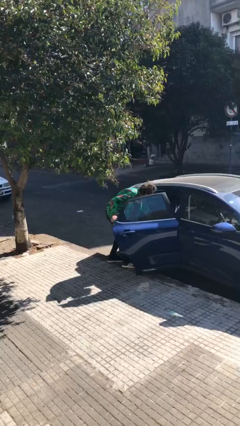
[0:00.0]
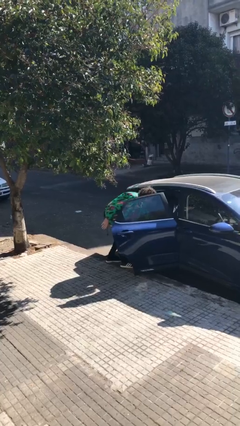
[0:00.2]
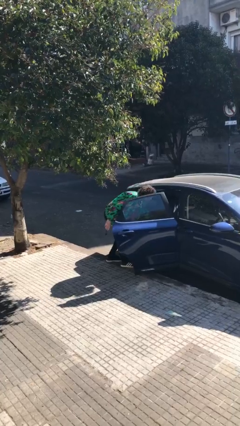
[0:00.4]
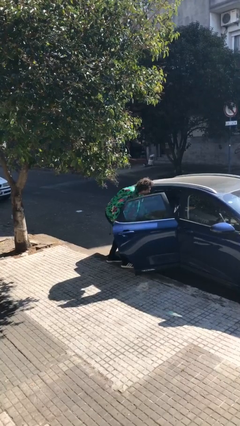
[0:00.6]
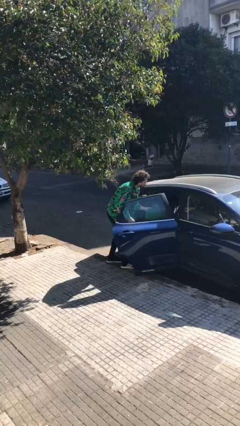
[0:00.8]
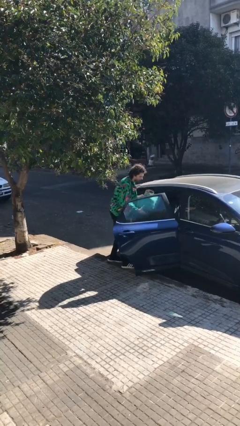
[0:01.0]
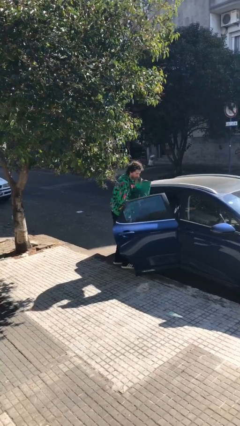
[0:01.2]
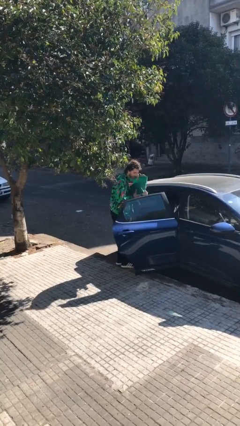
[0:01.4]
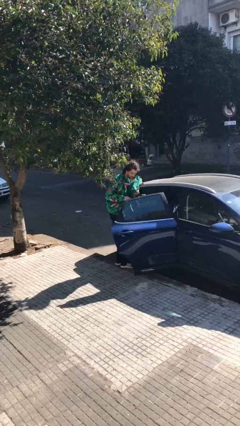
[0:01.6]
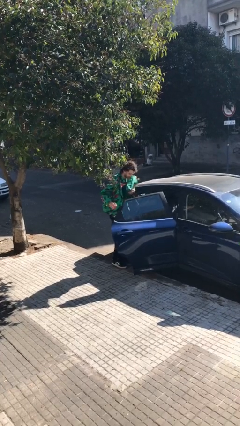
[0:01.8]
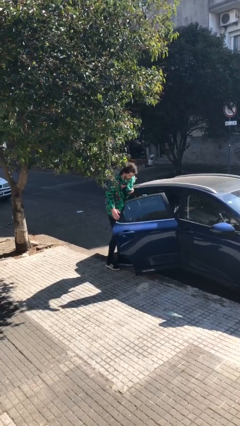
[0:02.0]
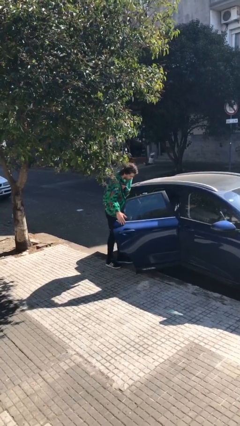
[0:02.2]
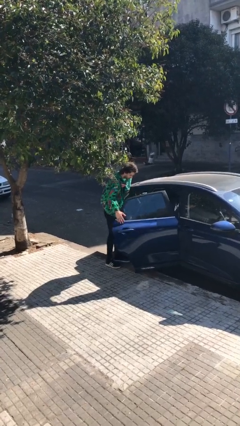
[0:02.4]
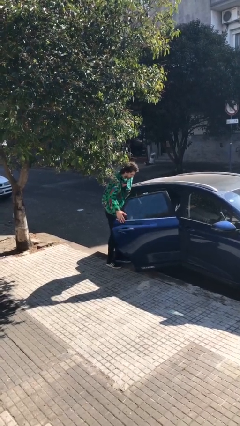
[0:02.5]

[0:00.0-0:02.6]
person unloads car

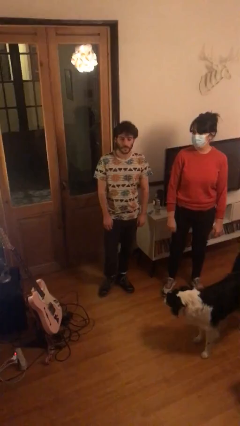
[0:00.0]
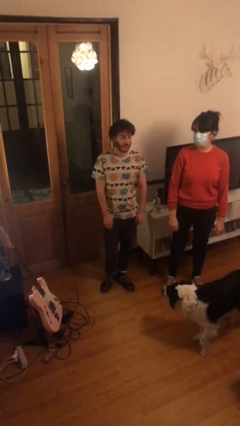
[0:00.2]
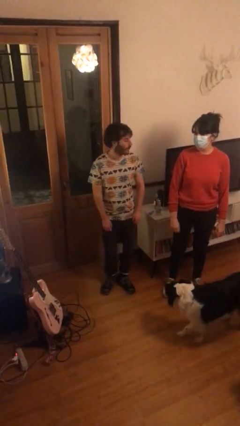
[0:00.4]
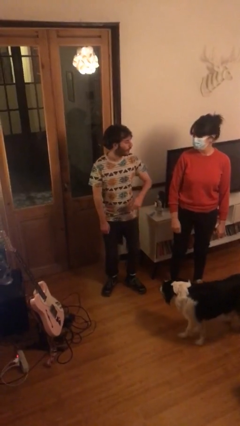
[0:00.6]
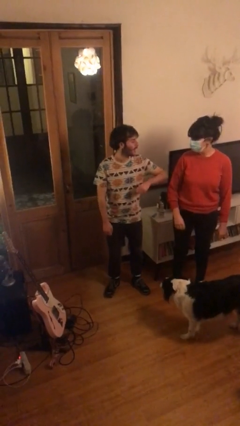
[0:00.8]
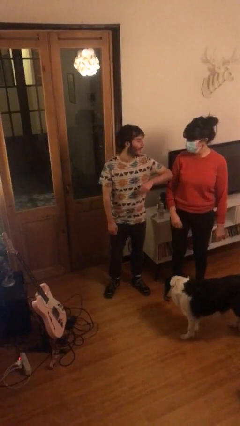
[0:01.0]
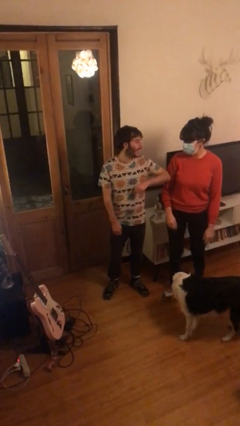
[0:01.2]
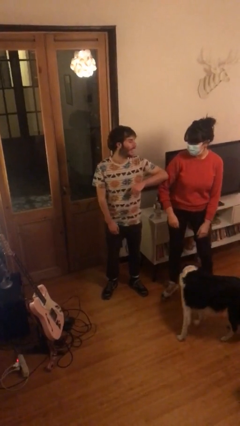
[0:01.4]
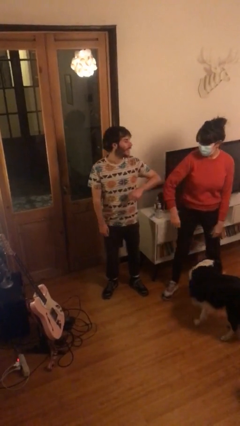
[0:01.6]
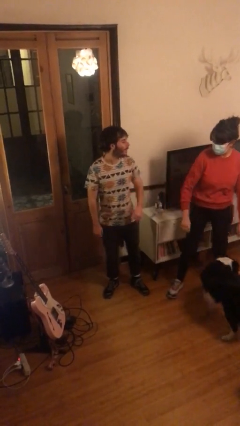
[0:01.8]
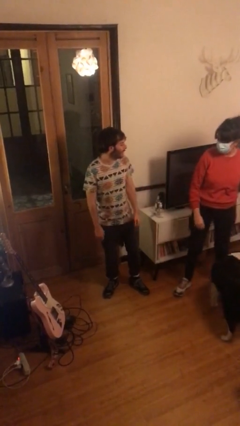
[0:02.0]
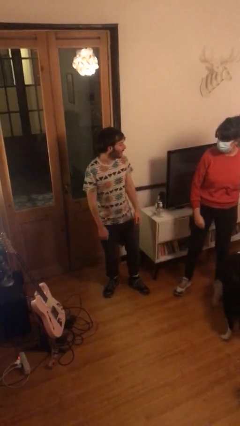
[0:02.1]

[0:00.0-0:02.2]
person nudges person with elbow

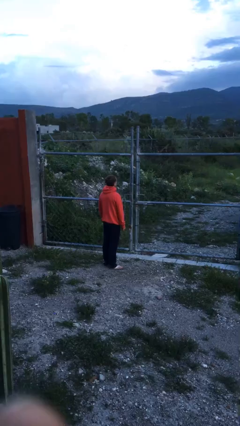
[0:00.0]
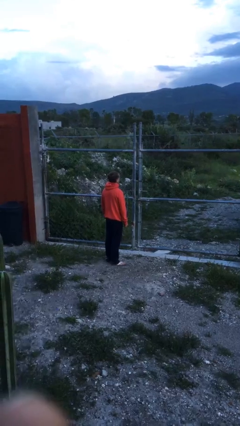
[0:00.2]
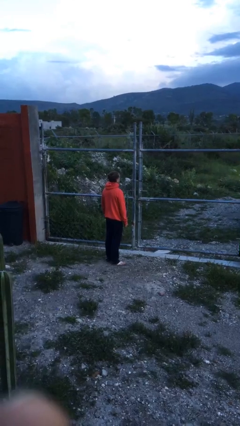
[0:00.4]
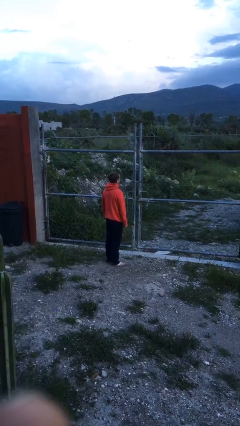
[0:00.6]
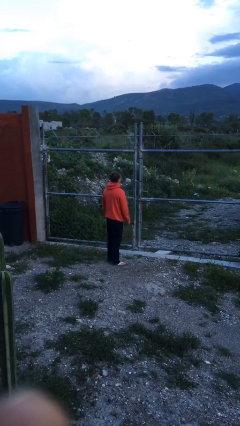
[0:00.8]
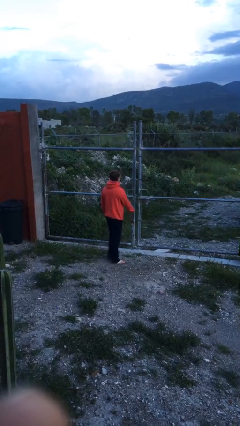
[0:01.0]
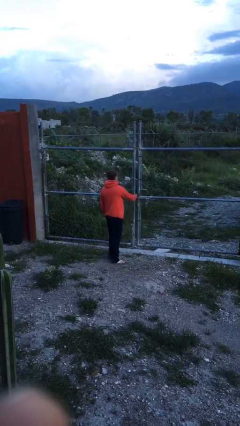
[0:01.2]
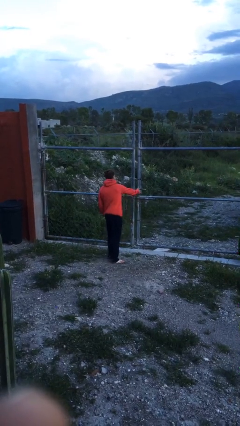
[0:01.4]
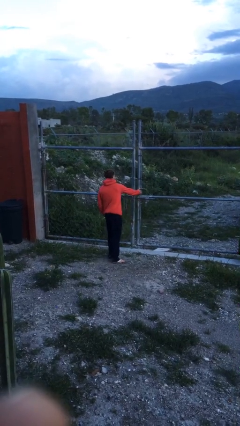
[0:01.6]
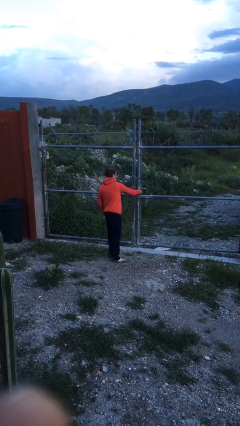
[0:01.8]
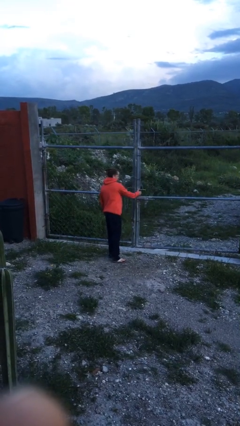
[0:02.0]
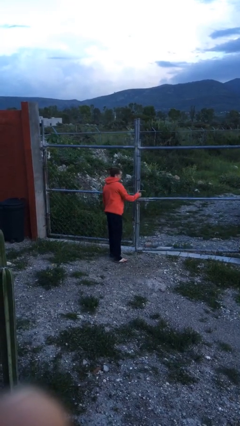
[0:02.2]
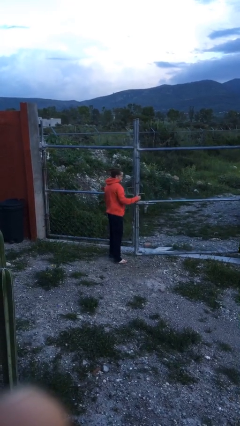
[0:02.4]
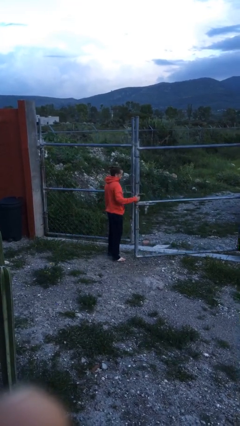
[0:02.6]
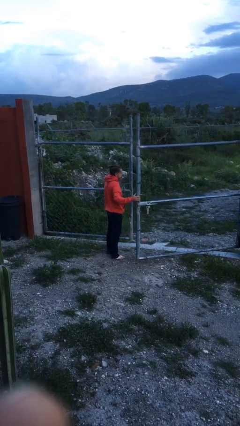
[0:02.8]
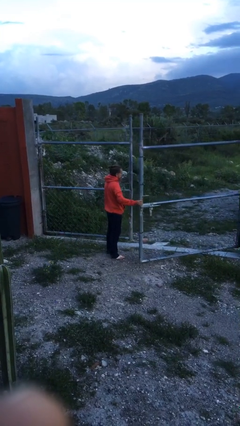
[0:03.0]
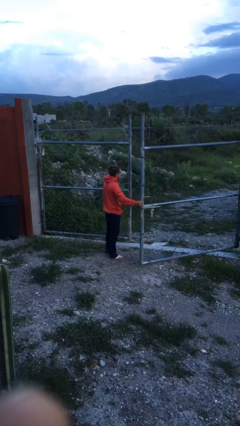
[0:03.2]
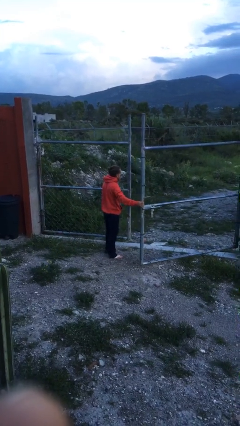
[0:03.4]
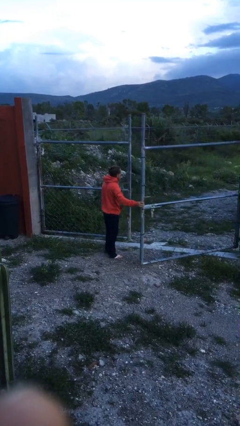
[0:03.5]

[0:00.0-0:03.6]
person opens gate

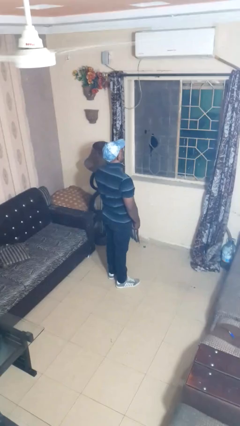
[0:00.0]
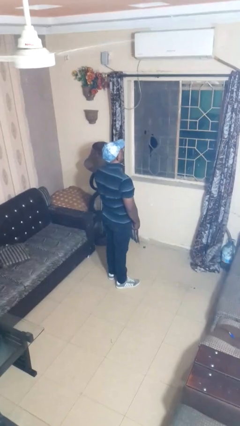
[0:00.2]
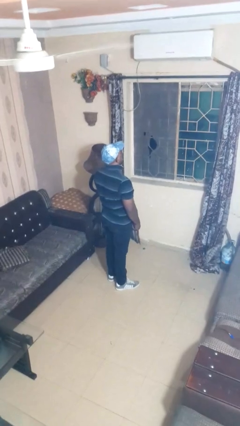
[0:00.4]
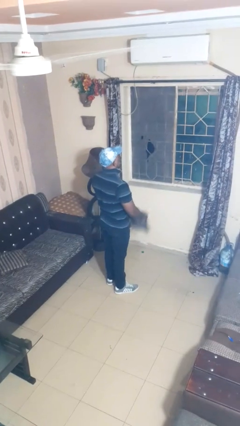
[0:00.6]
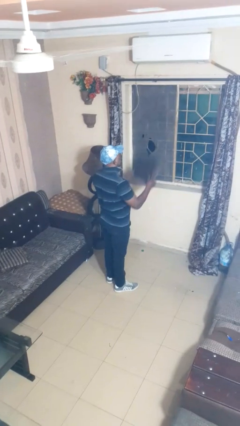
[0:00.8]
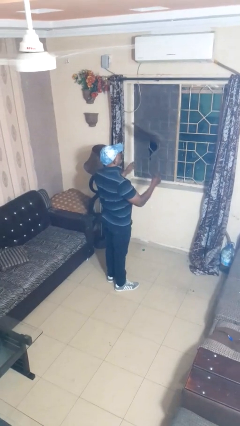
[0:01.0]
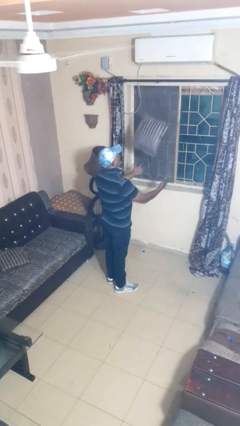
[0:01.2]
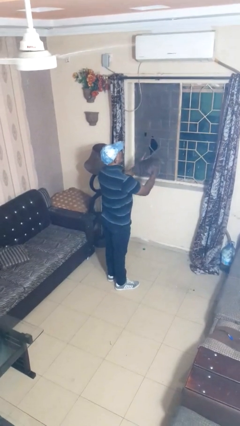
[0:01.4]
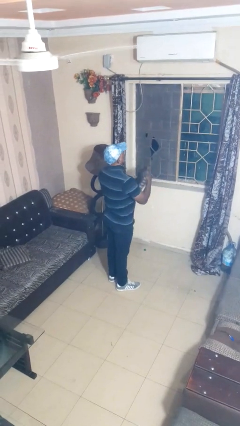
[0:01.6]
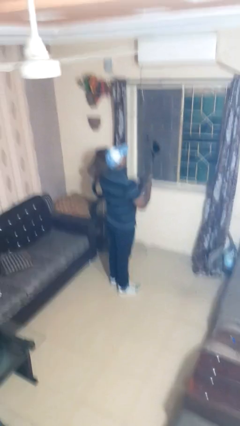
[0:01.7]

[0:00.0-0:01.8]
person drops object

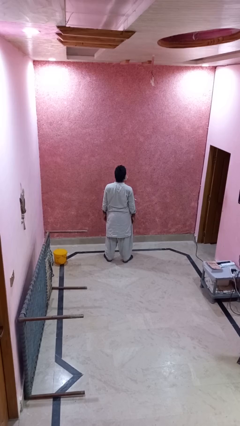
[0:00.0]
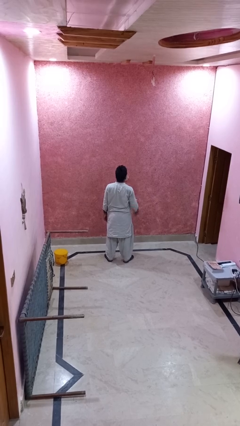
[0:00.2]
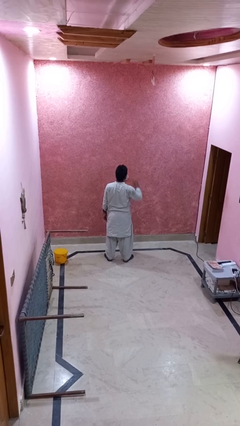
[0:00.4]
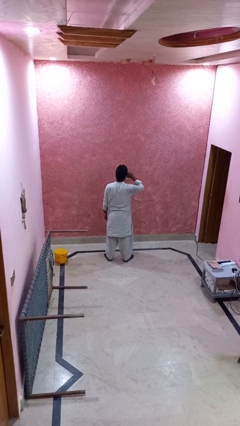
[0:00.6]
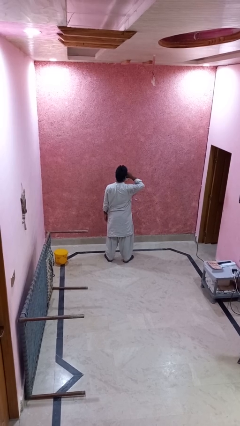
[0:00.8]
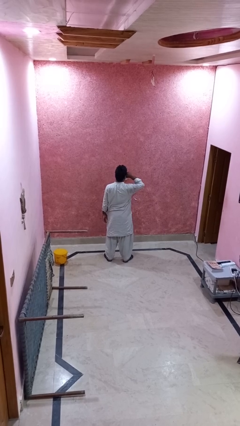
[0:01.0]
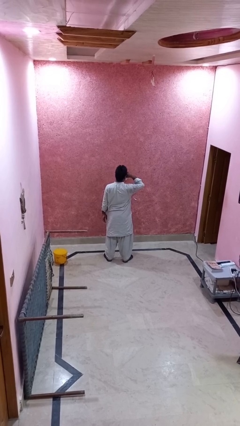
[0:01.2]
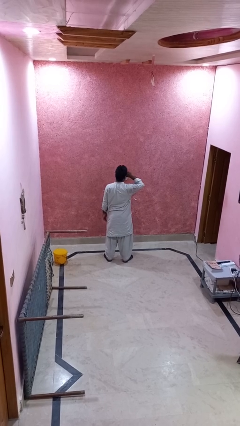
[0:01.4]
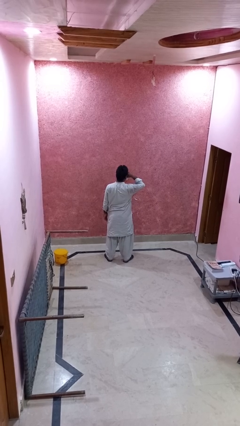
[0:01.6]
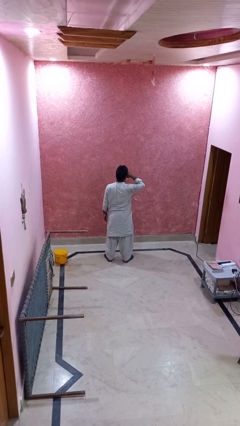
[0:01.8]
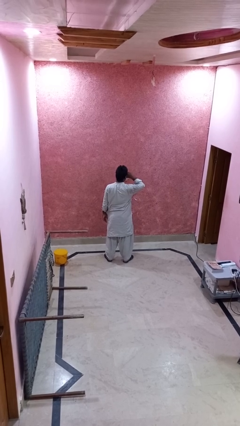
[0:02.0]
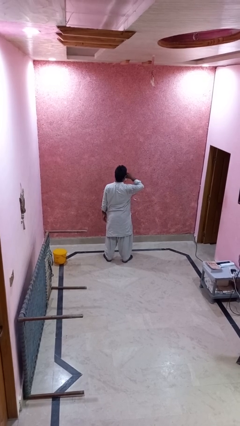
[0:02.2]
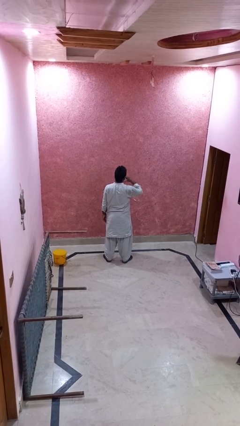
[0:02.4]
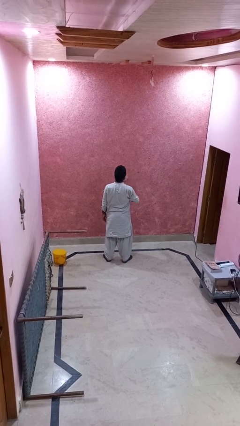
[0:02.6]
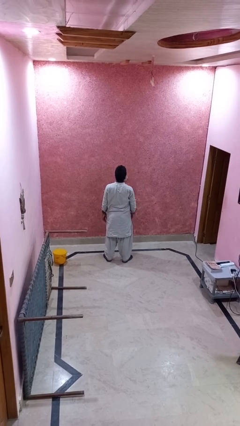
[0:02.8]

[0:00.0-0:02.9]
person rubs eyes

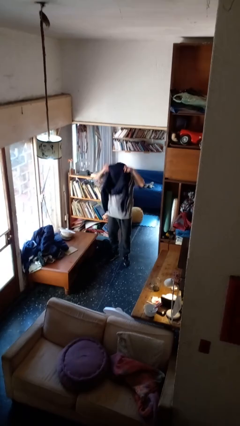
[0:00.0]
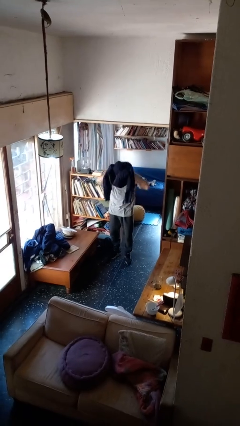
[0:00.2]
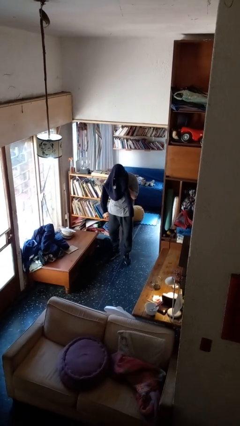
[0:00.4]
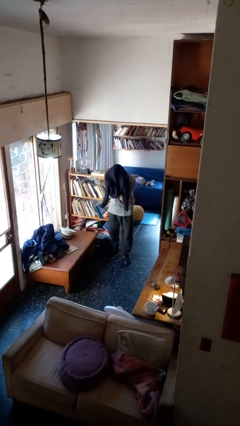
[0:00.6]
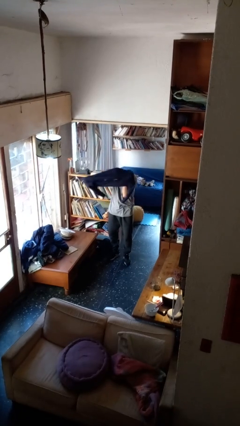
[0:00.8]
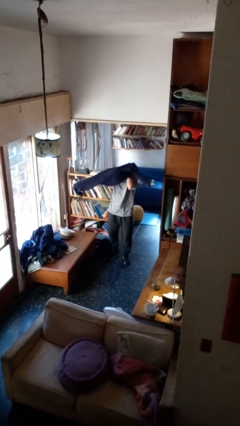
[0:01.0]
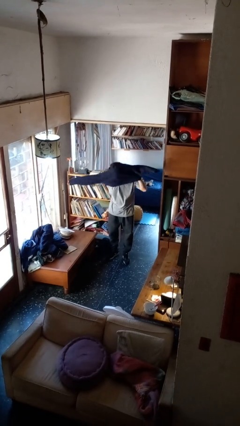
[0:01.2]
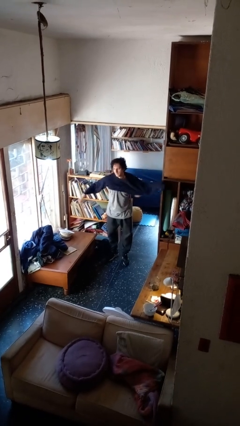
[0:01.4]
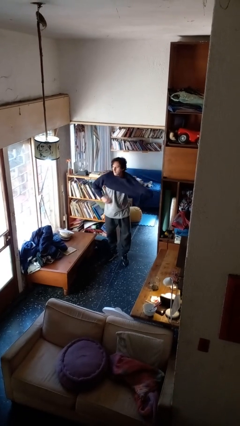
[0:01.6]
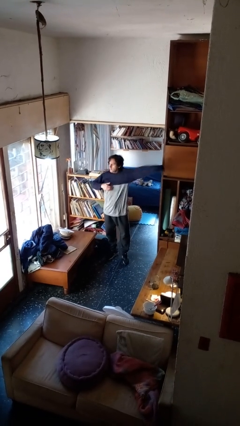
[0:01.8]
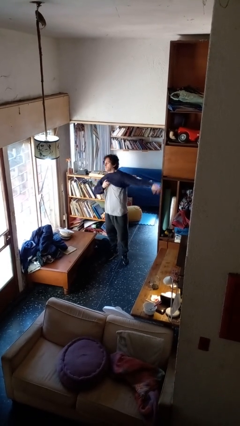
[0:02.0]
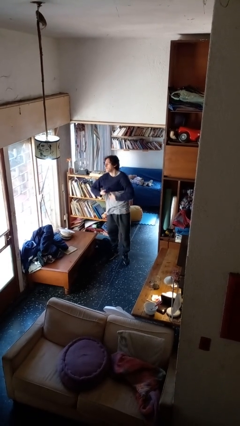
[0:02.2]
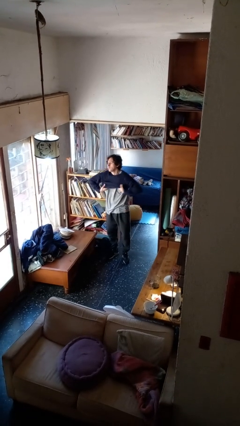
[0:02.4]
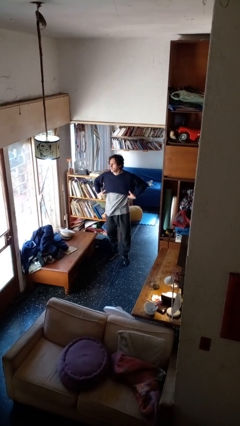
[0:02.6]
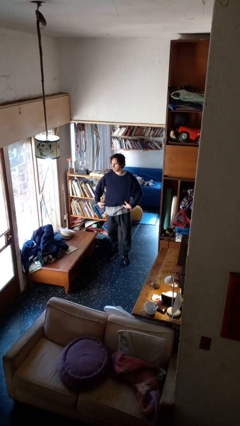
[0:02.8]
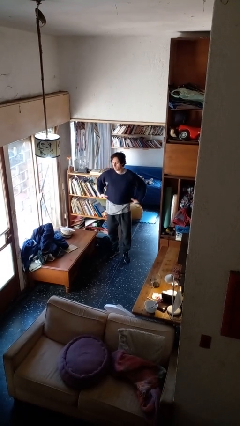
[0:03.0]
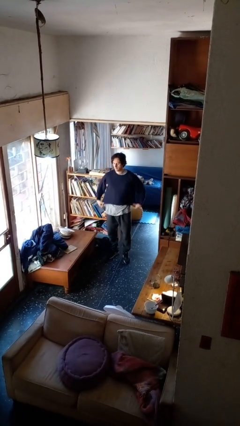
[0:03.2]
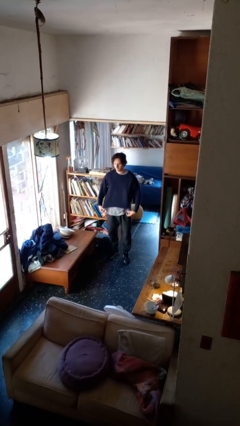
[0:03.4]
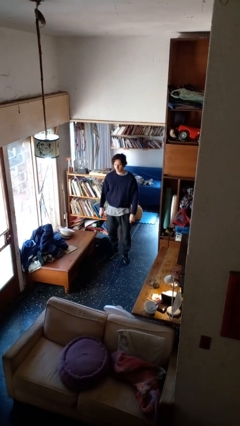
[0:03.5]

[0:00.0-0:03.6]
person puts on shirt

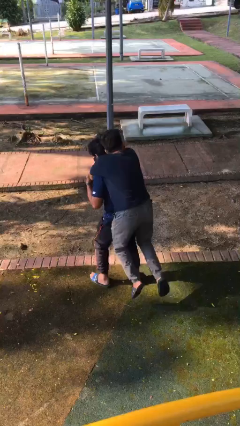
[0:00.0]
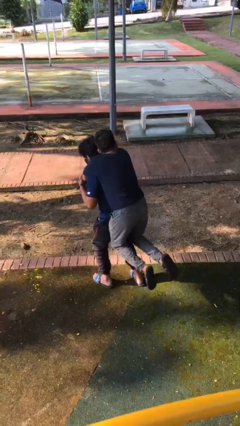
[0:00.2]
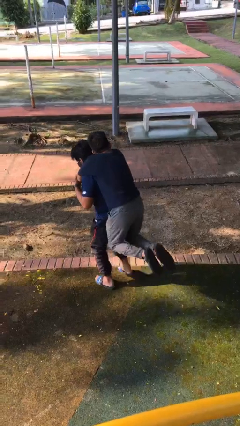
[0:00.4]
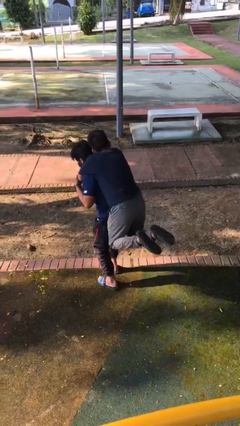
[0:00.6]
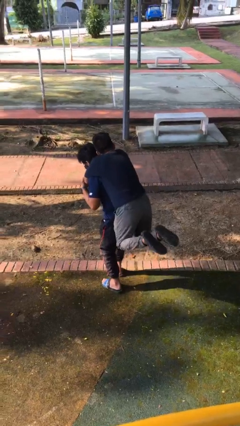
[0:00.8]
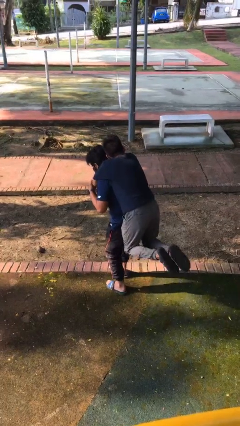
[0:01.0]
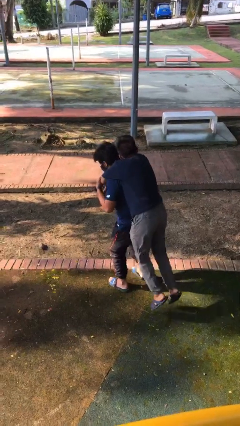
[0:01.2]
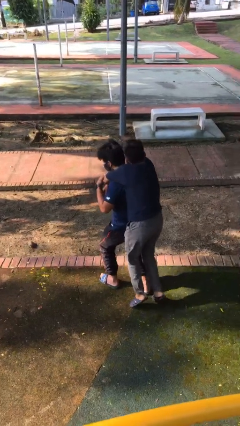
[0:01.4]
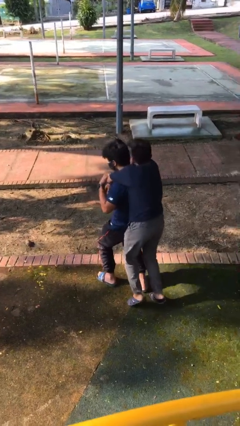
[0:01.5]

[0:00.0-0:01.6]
person carries person over shoulder
